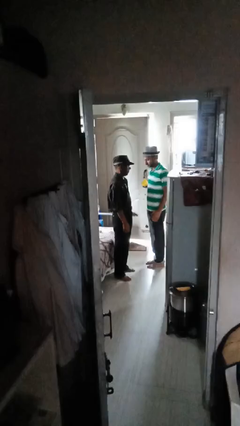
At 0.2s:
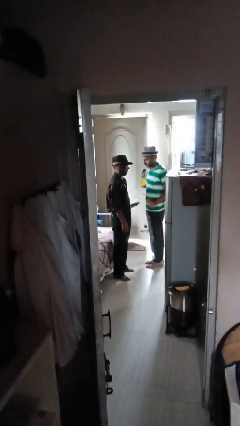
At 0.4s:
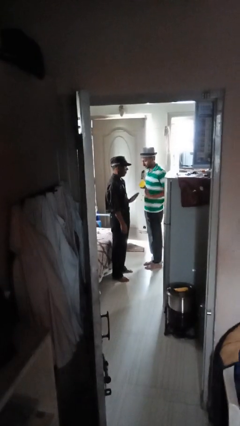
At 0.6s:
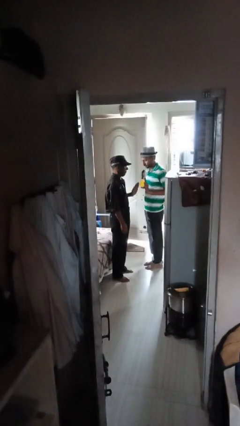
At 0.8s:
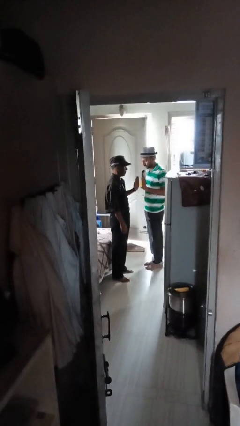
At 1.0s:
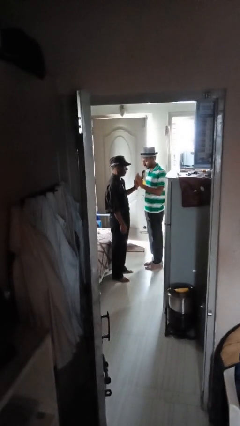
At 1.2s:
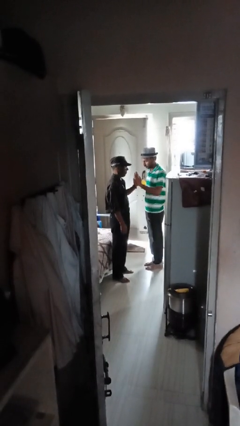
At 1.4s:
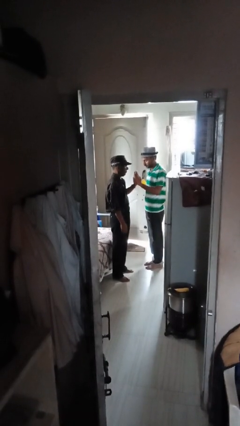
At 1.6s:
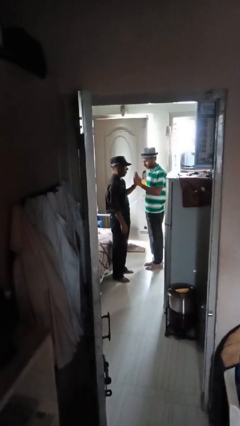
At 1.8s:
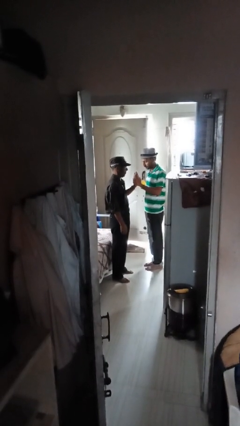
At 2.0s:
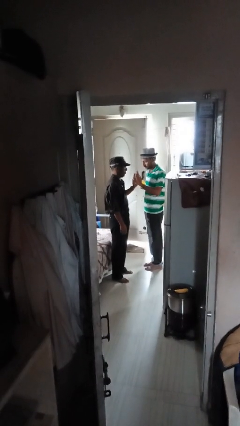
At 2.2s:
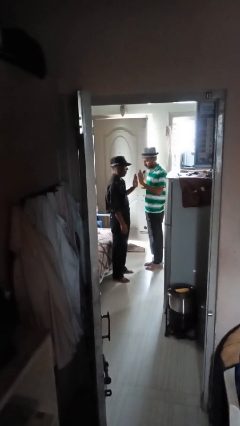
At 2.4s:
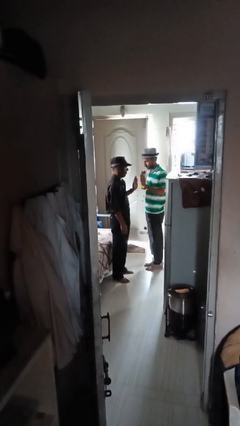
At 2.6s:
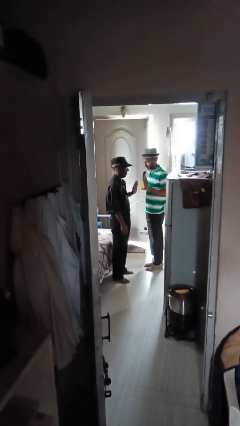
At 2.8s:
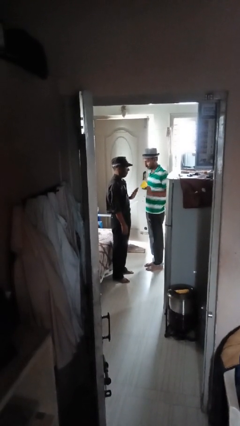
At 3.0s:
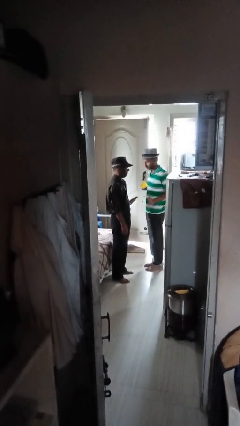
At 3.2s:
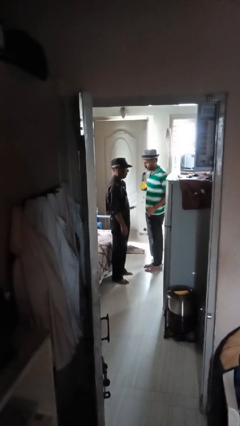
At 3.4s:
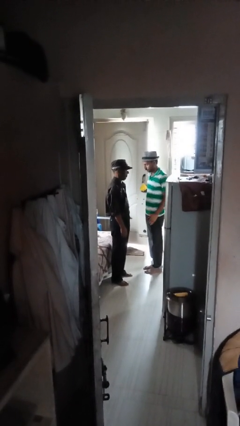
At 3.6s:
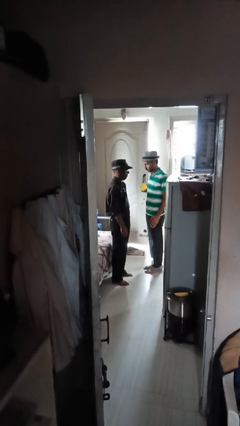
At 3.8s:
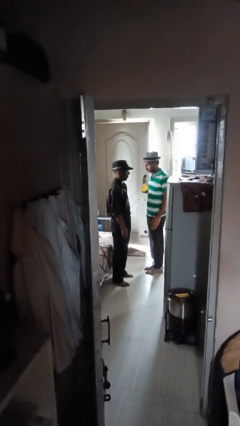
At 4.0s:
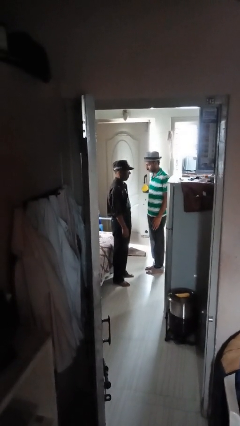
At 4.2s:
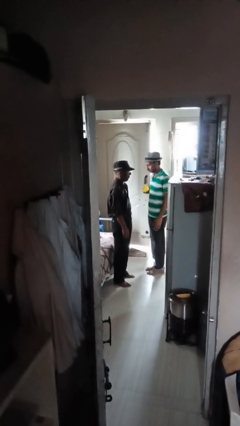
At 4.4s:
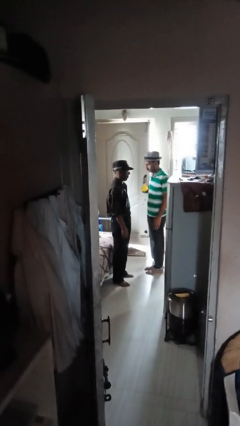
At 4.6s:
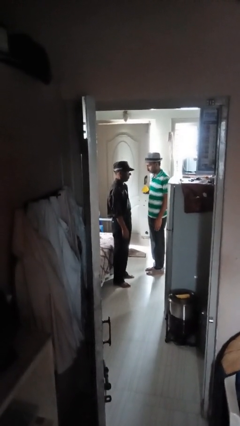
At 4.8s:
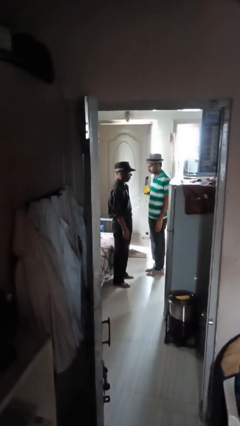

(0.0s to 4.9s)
person highfives hand

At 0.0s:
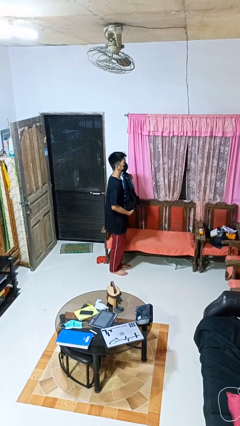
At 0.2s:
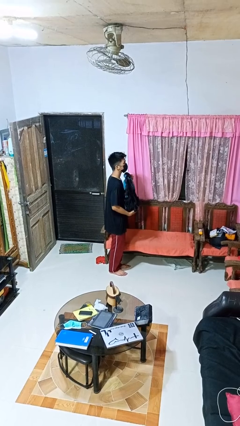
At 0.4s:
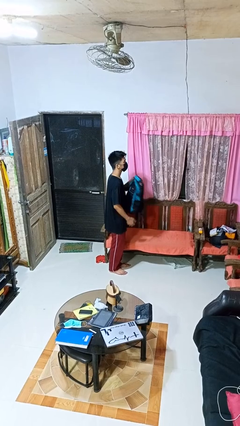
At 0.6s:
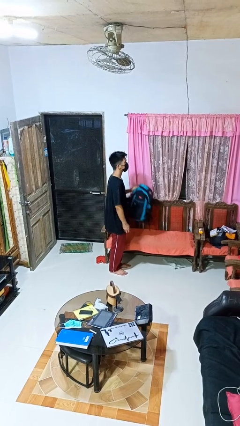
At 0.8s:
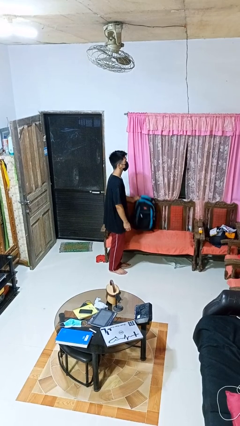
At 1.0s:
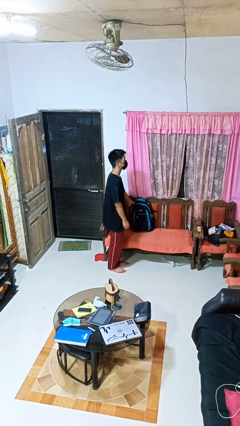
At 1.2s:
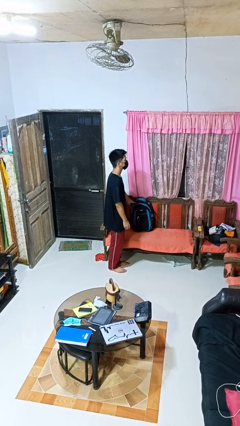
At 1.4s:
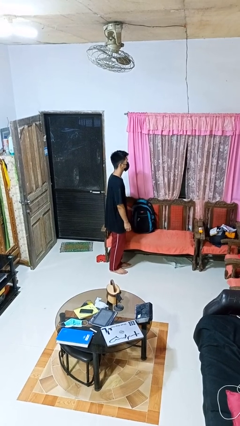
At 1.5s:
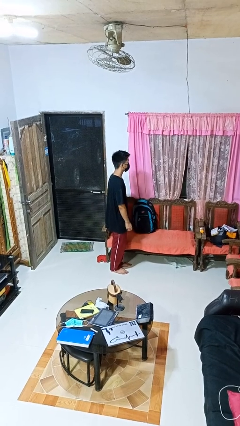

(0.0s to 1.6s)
person puts down object on couch

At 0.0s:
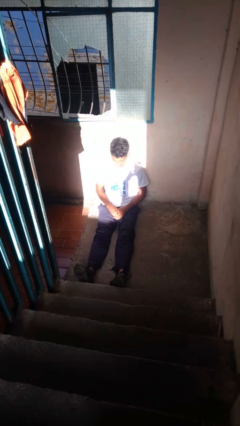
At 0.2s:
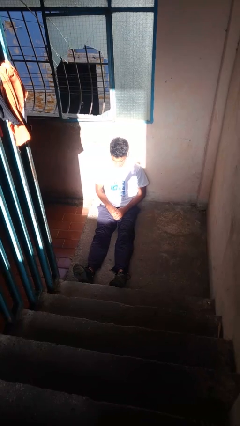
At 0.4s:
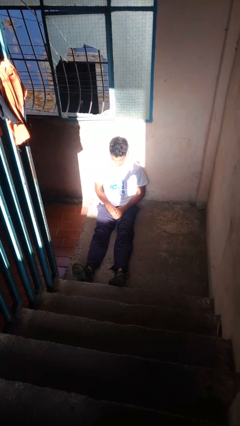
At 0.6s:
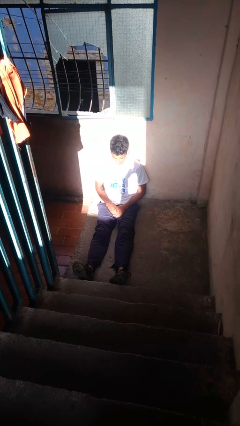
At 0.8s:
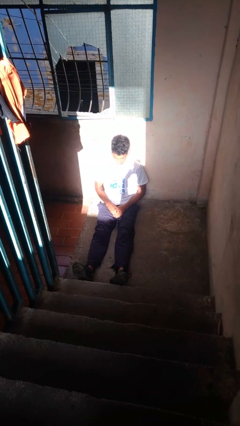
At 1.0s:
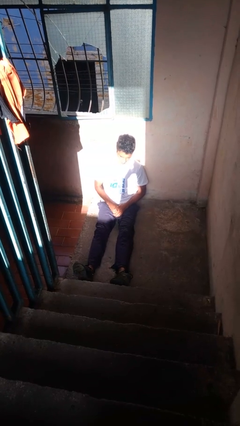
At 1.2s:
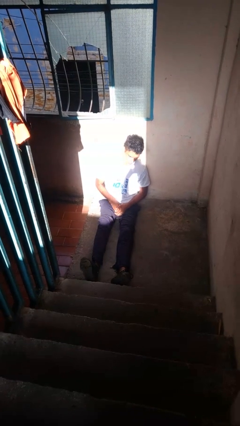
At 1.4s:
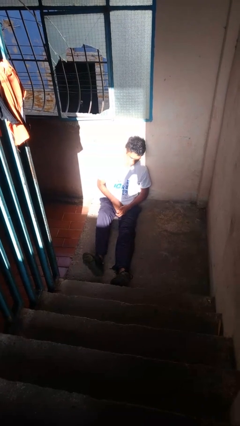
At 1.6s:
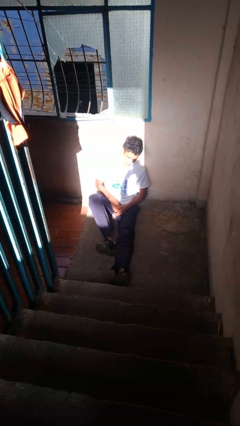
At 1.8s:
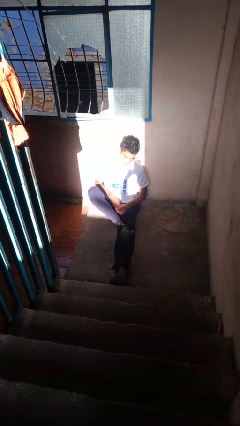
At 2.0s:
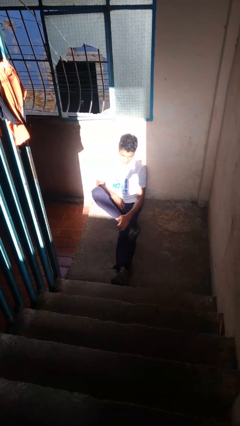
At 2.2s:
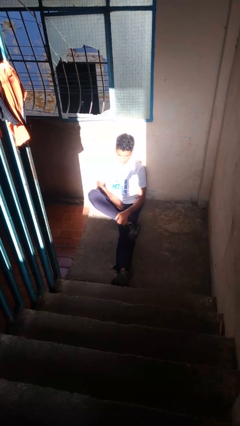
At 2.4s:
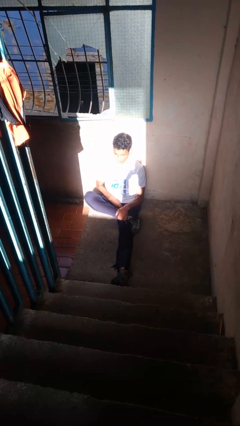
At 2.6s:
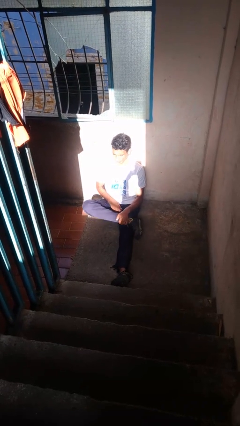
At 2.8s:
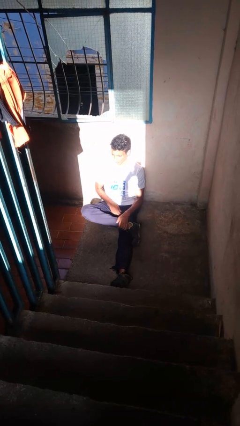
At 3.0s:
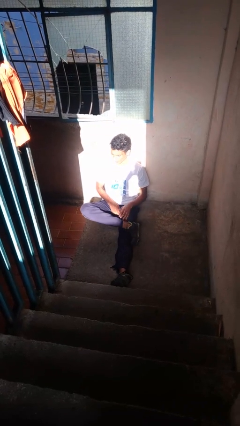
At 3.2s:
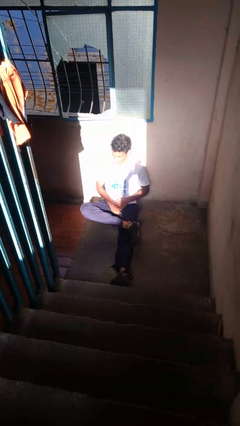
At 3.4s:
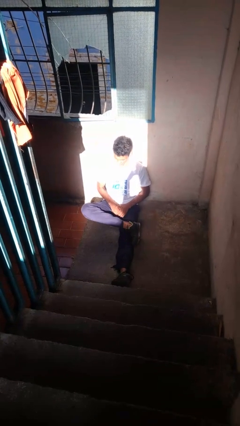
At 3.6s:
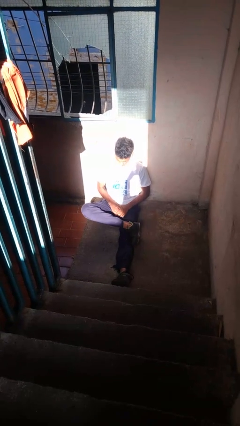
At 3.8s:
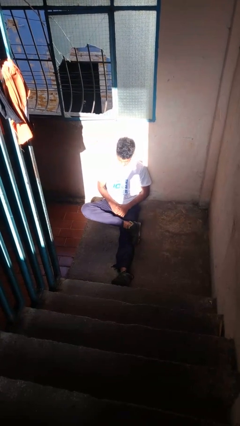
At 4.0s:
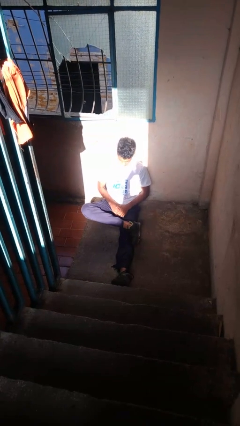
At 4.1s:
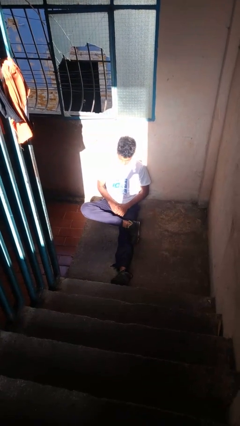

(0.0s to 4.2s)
person crosses legs

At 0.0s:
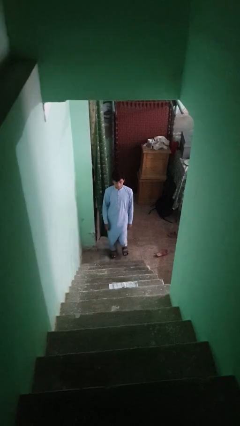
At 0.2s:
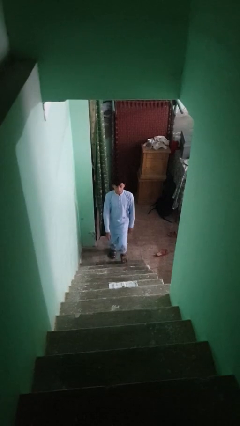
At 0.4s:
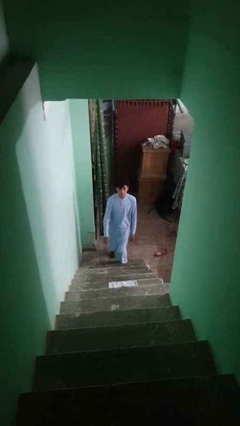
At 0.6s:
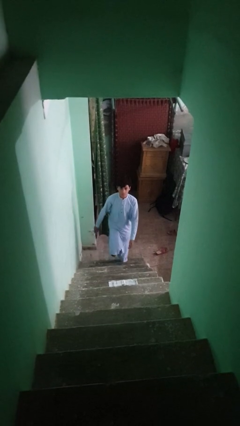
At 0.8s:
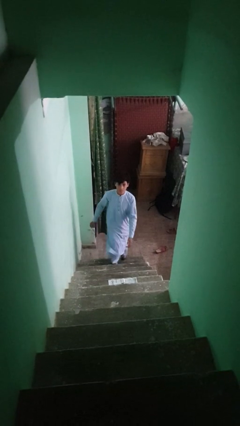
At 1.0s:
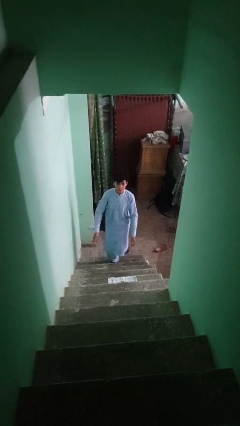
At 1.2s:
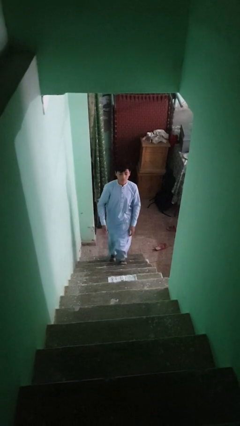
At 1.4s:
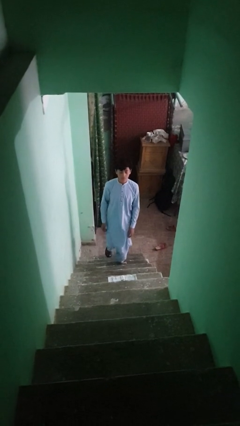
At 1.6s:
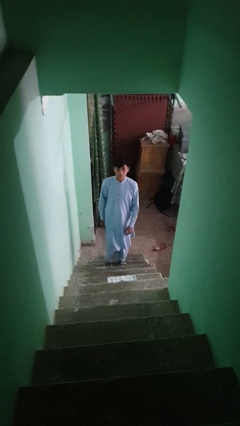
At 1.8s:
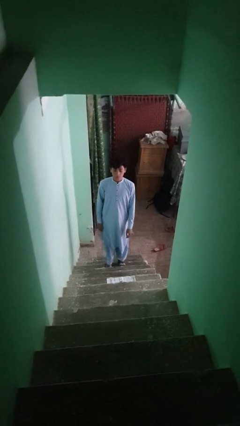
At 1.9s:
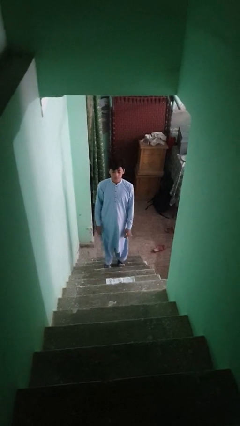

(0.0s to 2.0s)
person climbs up stairs

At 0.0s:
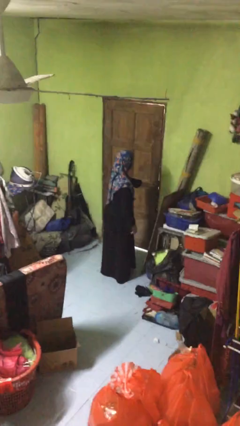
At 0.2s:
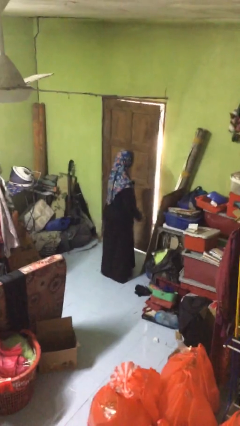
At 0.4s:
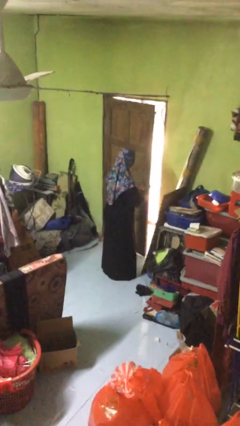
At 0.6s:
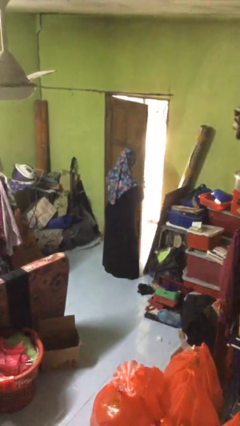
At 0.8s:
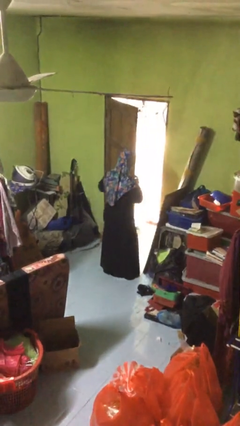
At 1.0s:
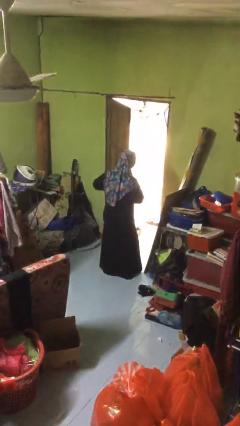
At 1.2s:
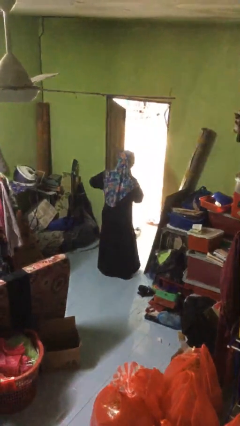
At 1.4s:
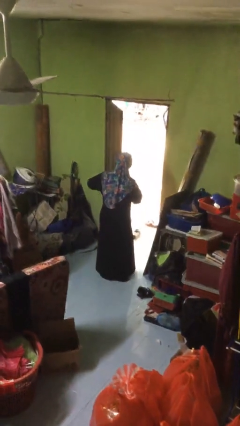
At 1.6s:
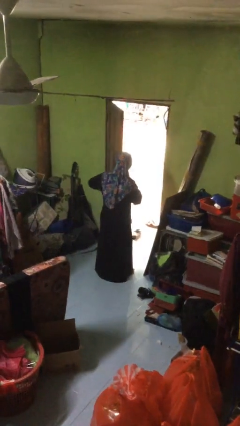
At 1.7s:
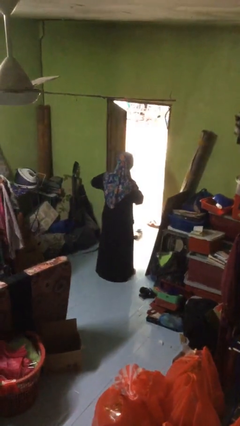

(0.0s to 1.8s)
person opens facility door

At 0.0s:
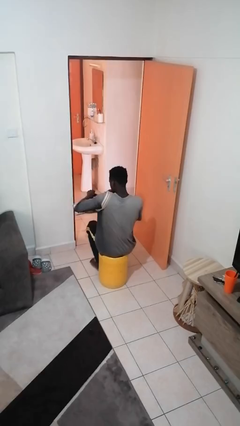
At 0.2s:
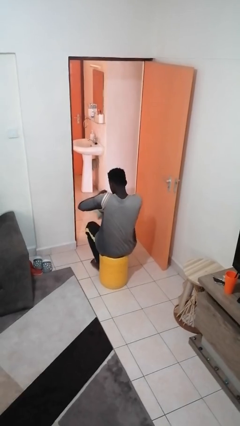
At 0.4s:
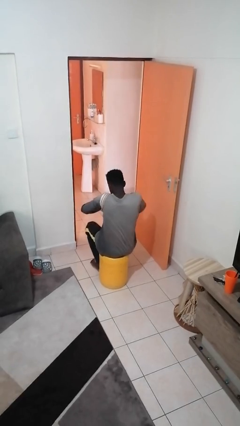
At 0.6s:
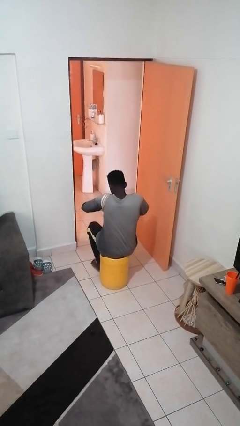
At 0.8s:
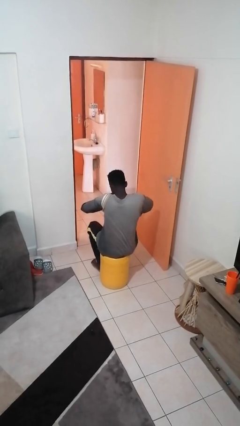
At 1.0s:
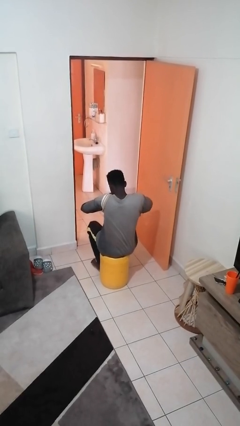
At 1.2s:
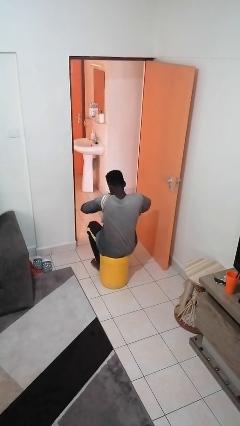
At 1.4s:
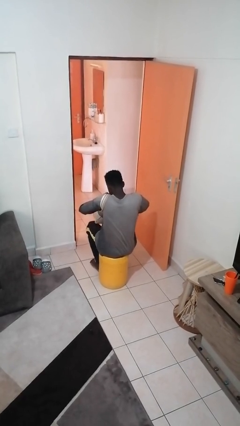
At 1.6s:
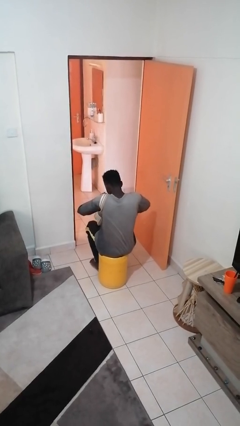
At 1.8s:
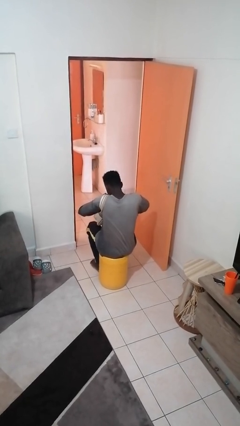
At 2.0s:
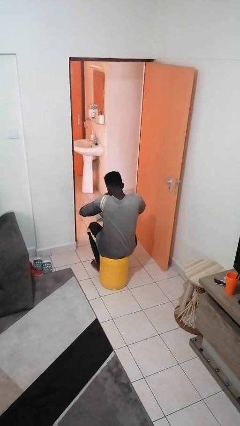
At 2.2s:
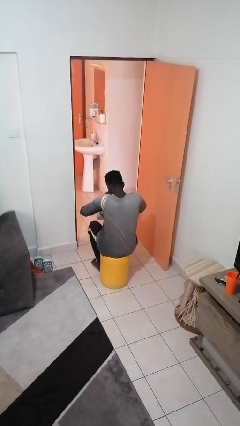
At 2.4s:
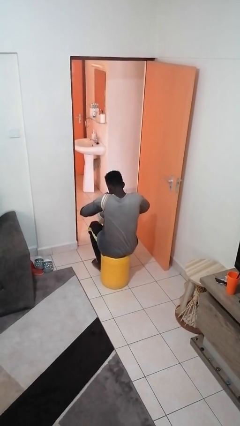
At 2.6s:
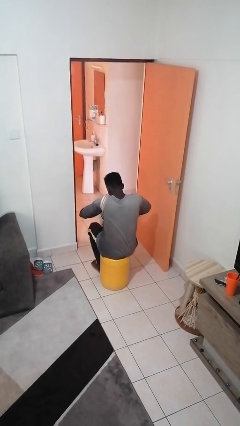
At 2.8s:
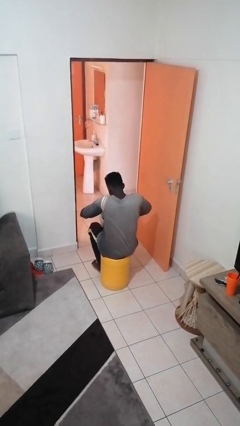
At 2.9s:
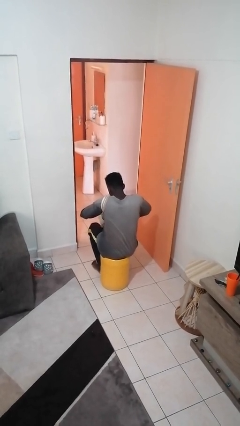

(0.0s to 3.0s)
person searches in purse

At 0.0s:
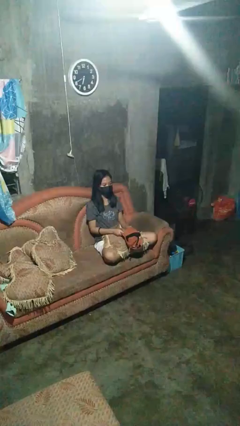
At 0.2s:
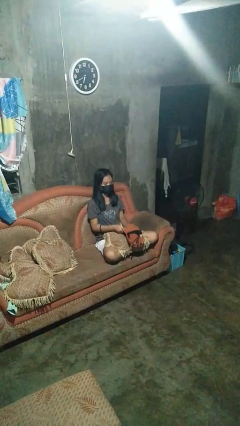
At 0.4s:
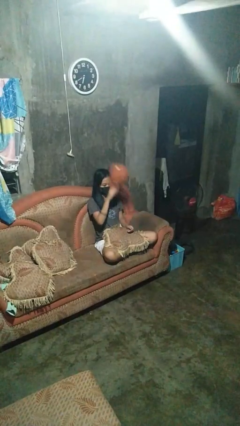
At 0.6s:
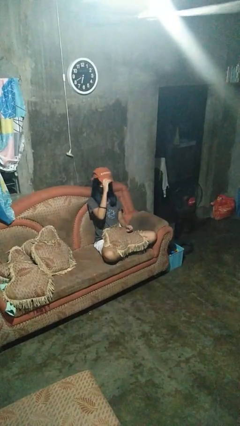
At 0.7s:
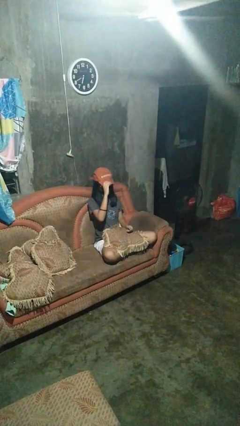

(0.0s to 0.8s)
person puts on hat
